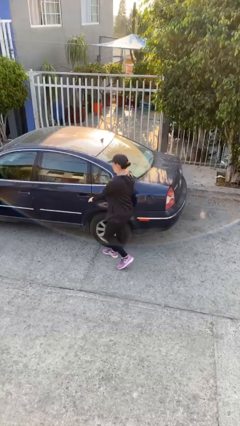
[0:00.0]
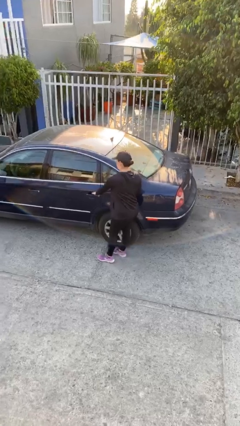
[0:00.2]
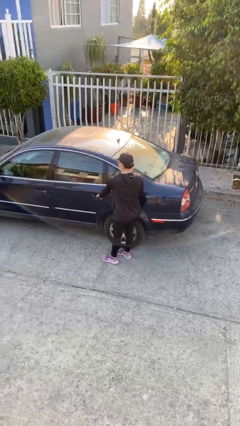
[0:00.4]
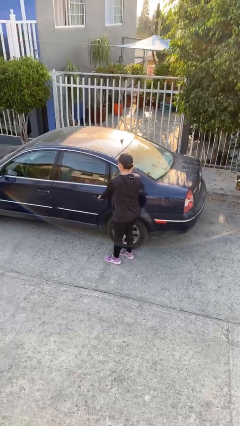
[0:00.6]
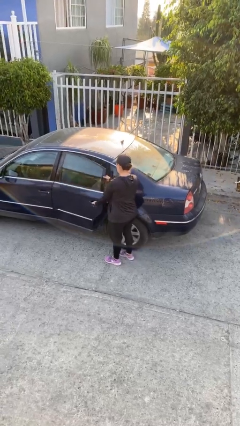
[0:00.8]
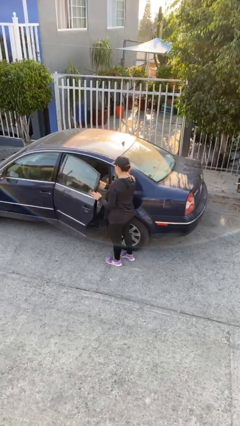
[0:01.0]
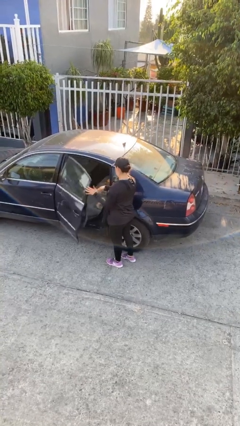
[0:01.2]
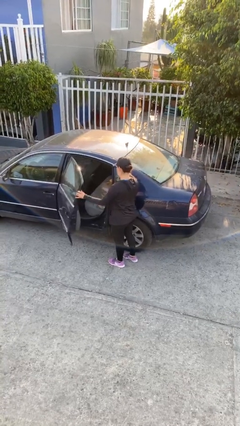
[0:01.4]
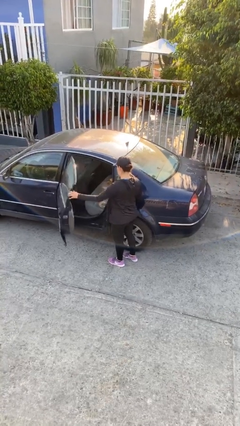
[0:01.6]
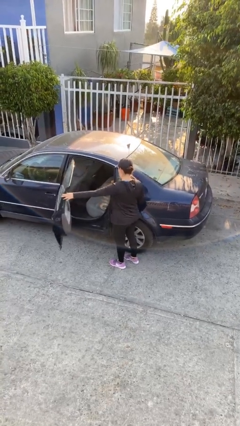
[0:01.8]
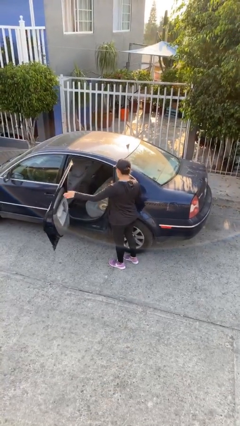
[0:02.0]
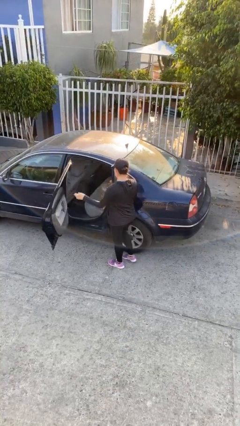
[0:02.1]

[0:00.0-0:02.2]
person opens car door

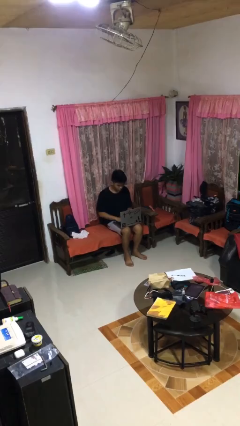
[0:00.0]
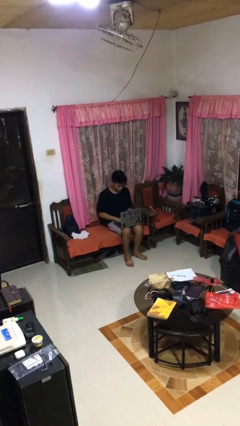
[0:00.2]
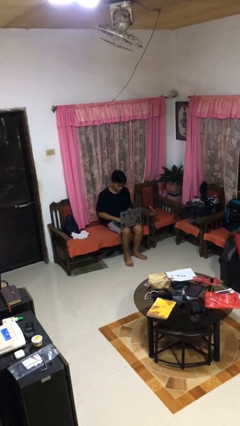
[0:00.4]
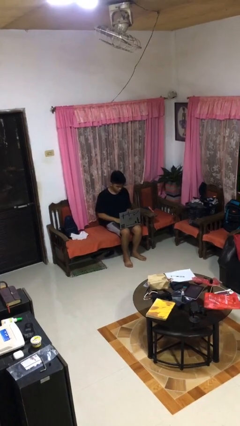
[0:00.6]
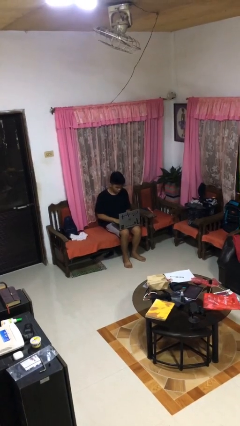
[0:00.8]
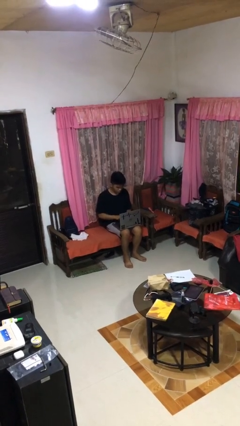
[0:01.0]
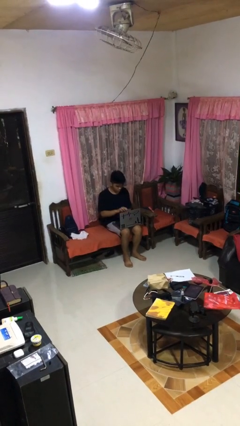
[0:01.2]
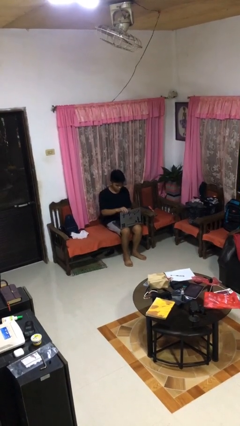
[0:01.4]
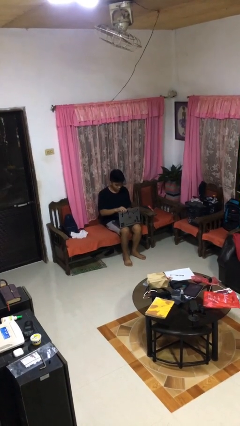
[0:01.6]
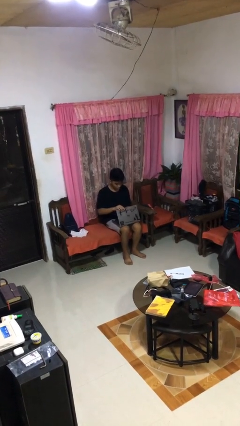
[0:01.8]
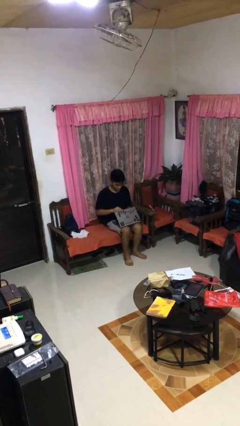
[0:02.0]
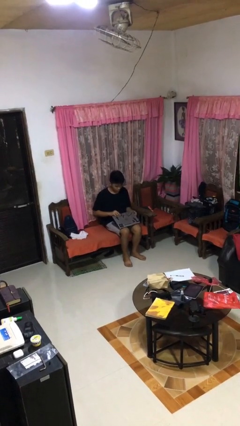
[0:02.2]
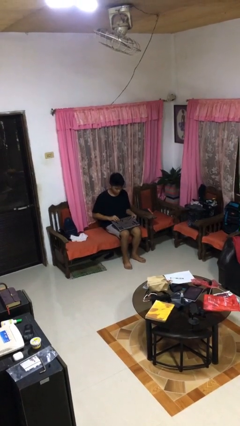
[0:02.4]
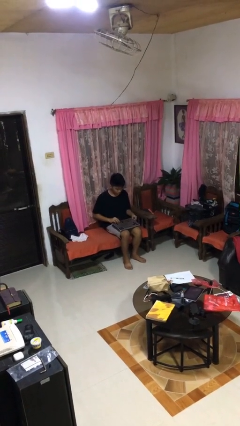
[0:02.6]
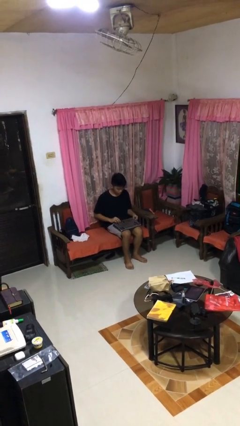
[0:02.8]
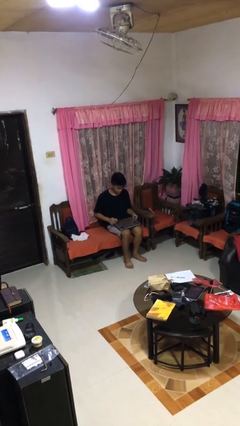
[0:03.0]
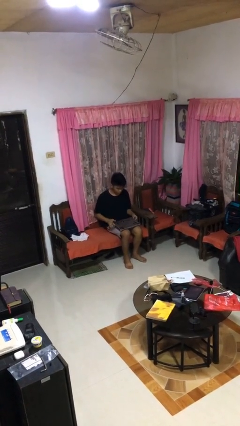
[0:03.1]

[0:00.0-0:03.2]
person closes laptop

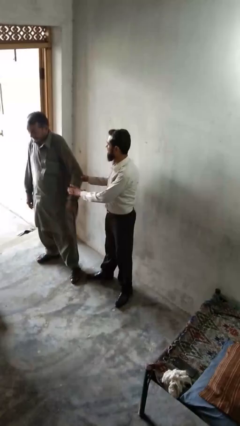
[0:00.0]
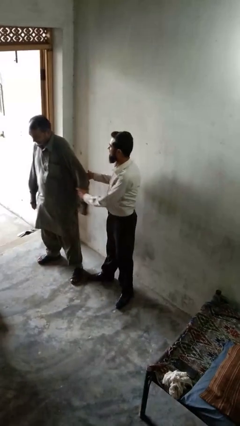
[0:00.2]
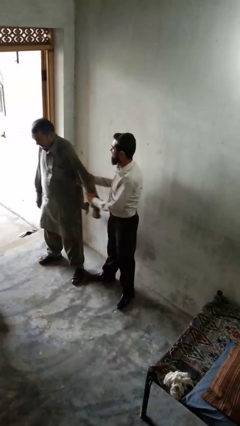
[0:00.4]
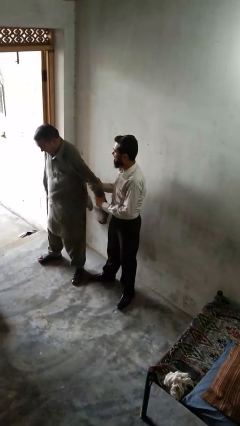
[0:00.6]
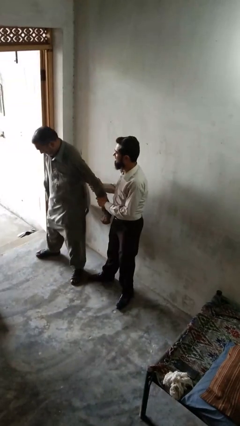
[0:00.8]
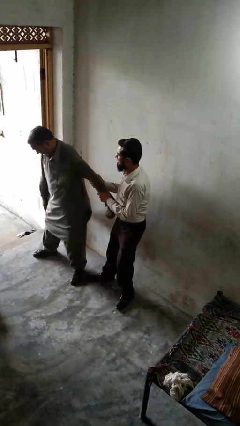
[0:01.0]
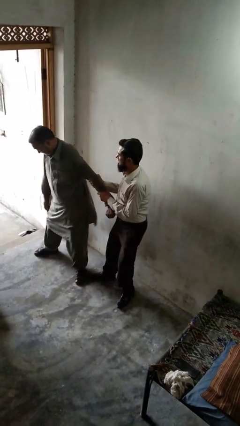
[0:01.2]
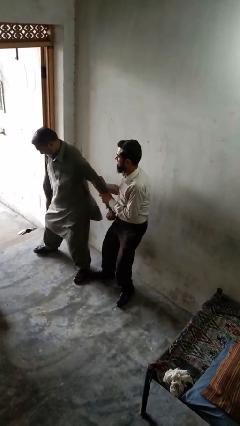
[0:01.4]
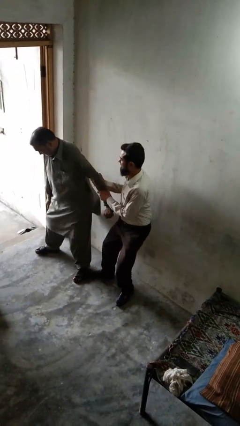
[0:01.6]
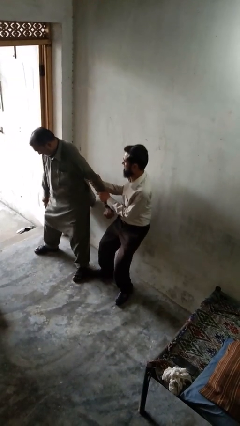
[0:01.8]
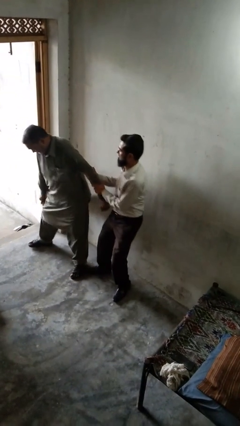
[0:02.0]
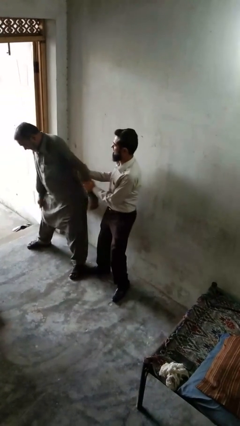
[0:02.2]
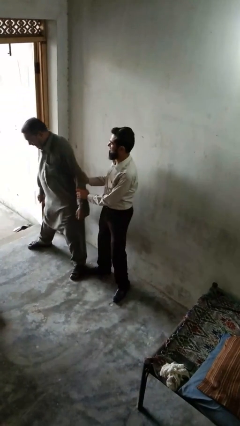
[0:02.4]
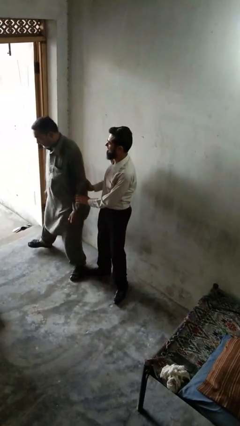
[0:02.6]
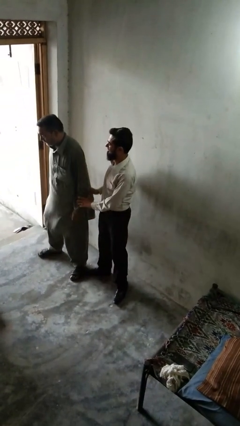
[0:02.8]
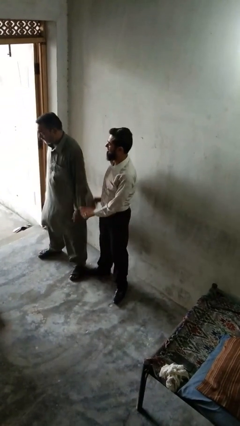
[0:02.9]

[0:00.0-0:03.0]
person grabs person by forearm

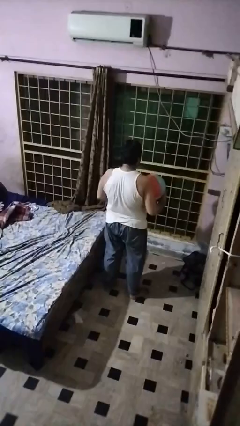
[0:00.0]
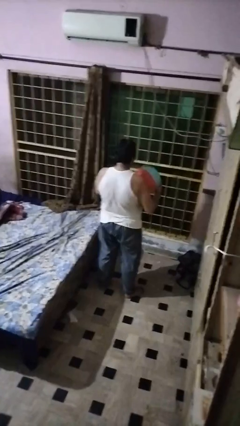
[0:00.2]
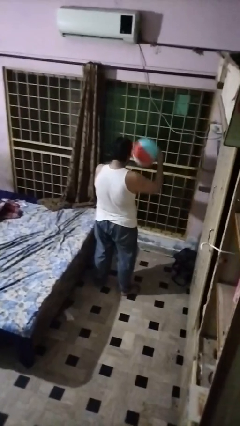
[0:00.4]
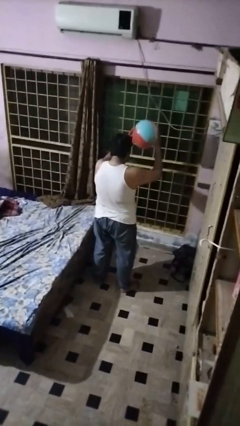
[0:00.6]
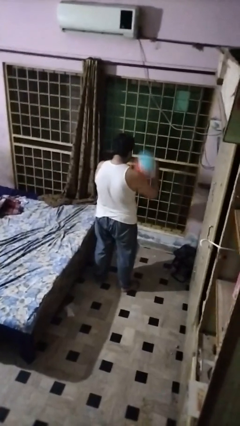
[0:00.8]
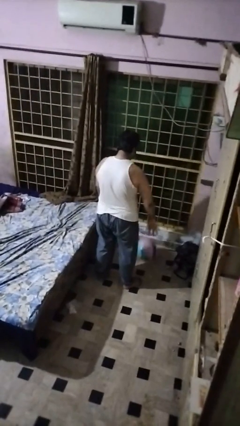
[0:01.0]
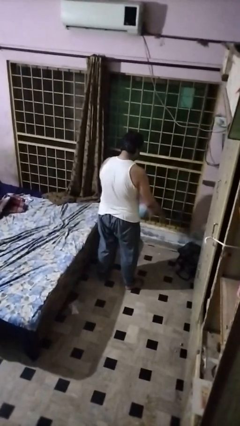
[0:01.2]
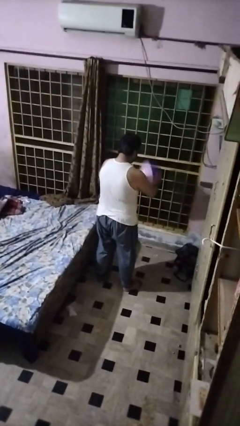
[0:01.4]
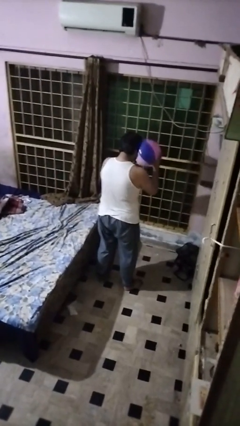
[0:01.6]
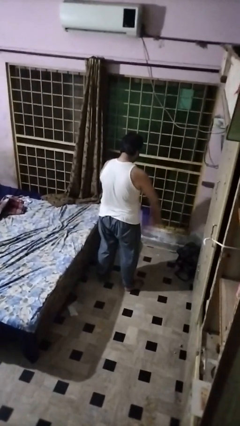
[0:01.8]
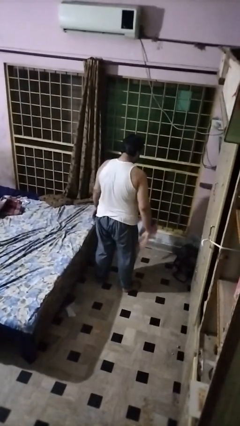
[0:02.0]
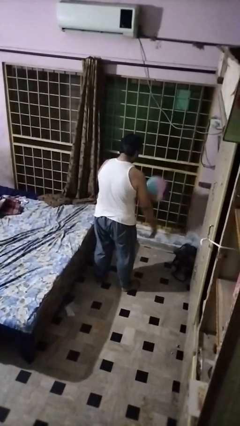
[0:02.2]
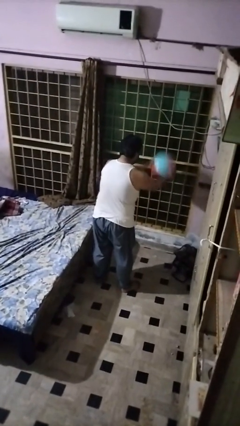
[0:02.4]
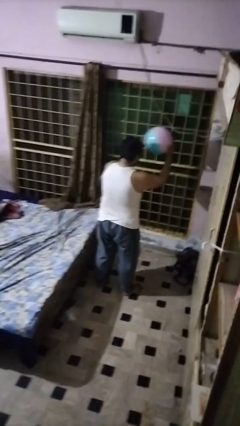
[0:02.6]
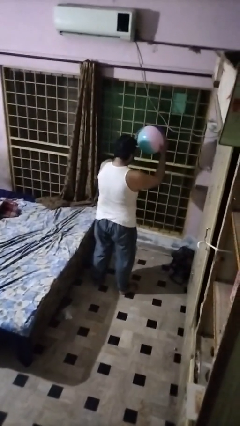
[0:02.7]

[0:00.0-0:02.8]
person bounces ball on floor

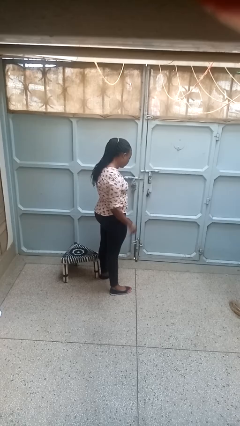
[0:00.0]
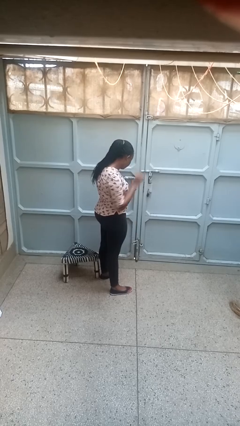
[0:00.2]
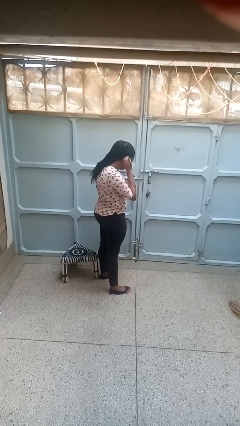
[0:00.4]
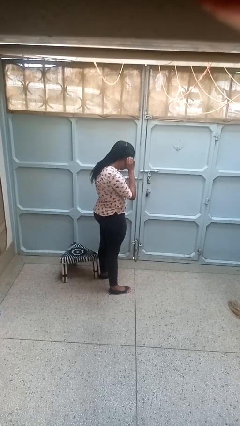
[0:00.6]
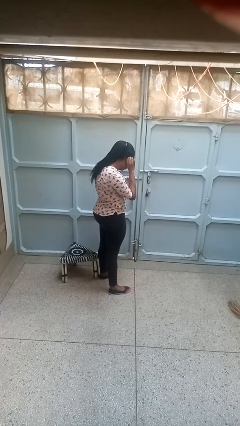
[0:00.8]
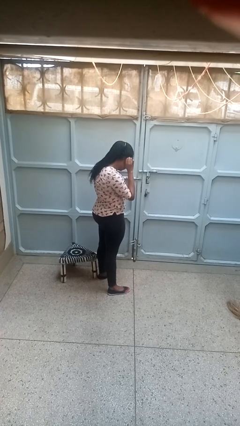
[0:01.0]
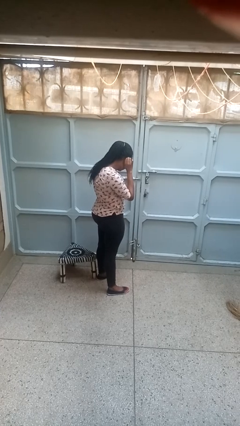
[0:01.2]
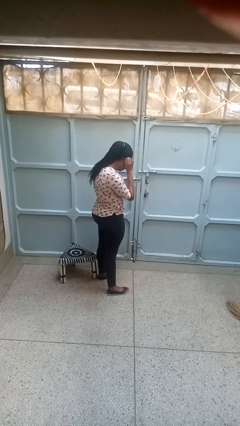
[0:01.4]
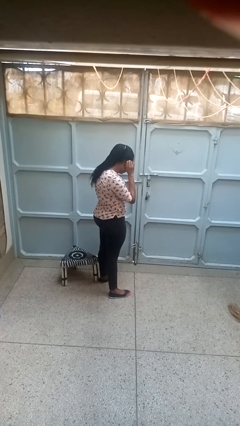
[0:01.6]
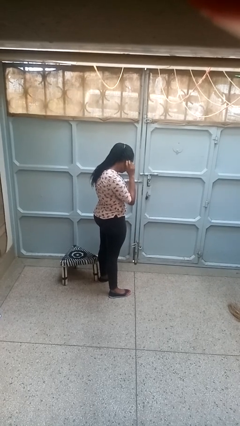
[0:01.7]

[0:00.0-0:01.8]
person gestures listen closely

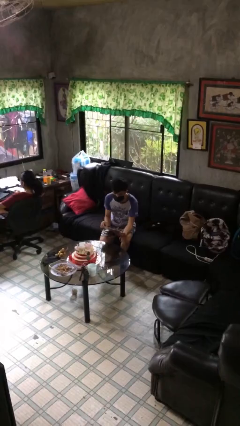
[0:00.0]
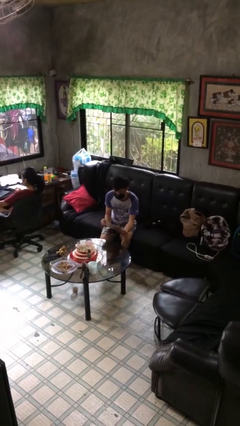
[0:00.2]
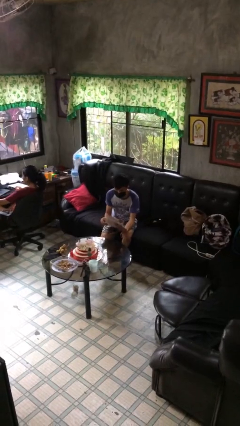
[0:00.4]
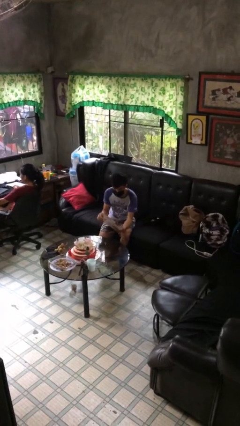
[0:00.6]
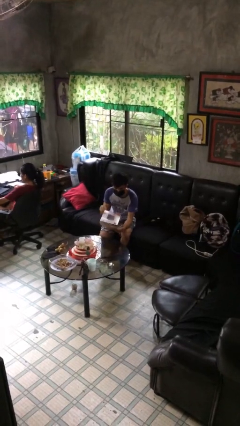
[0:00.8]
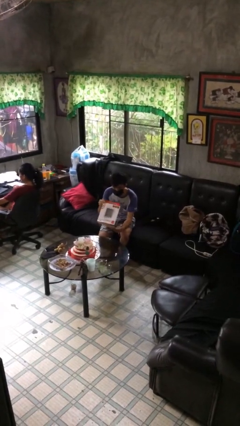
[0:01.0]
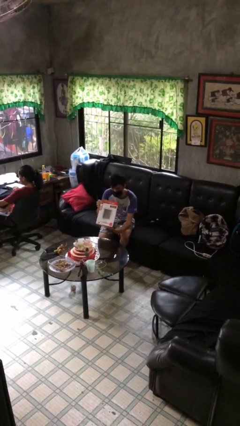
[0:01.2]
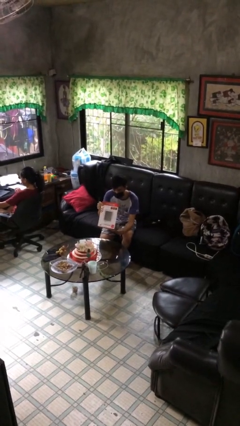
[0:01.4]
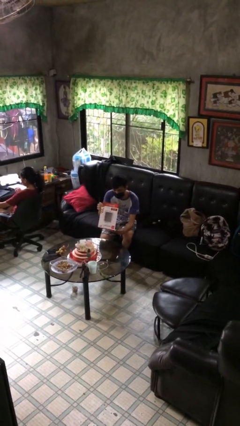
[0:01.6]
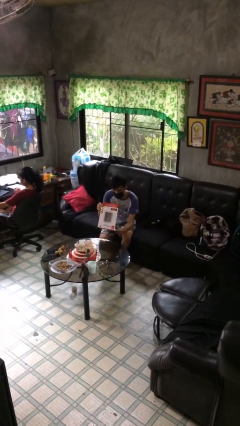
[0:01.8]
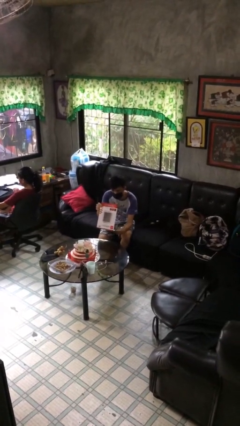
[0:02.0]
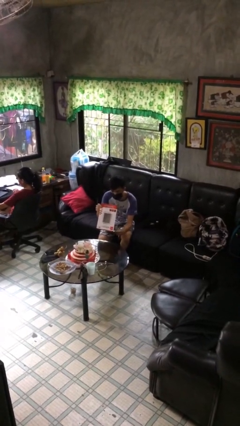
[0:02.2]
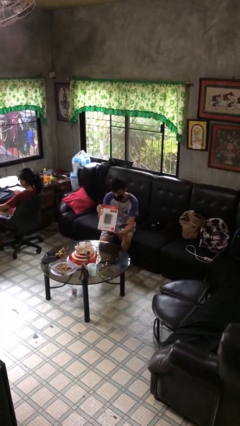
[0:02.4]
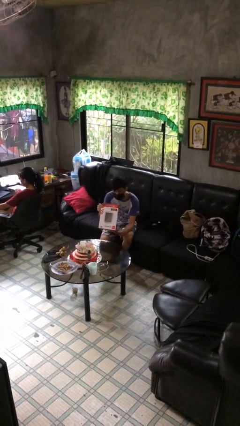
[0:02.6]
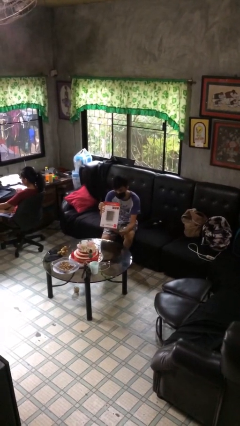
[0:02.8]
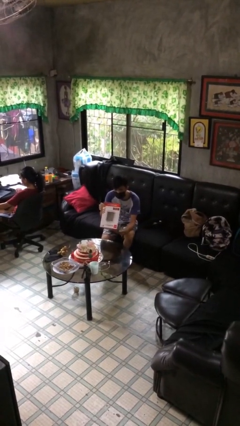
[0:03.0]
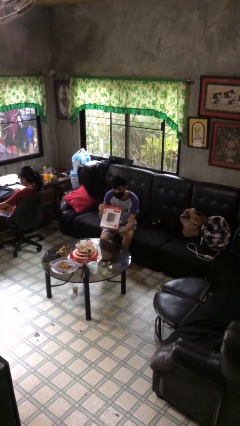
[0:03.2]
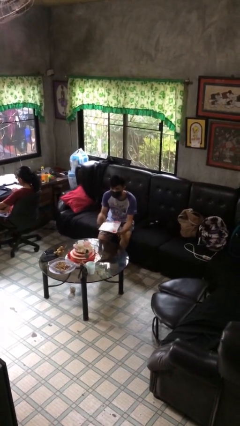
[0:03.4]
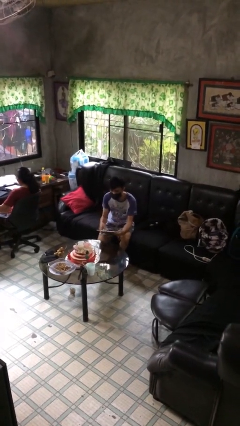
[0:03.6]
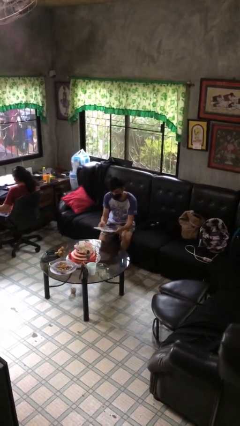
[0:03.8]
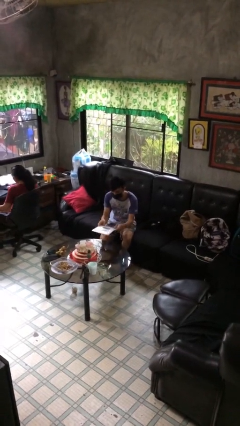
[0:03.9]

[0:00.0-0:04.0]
person reads document

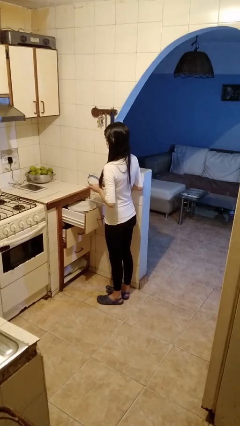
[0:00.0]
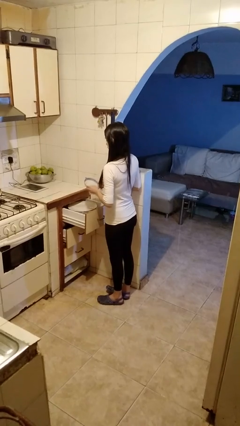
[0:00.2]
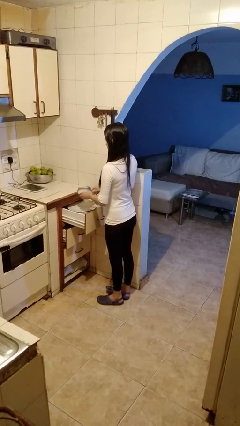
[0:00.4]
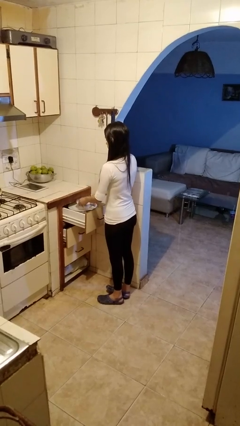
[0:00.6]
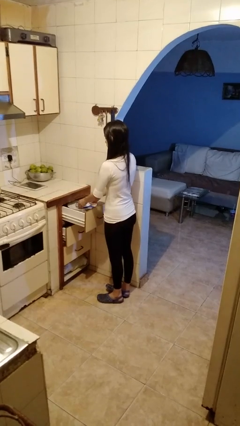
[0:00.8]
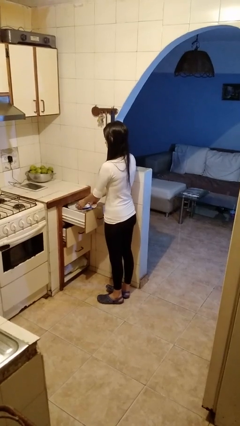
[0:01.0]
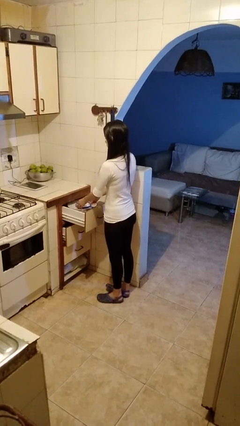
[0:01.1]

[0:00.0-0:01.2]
person puts down object into cabinet
